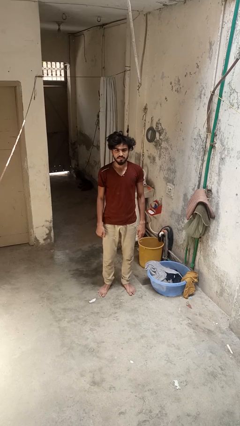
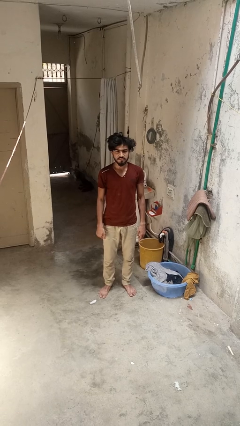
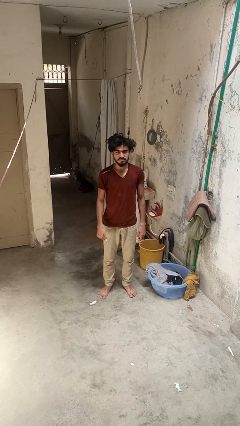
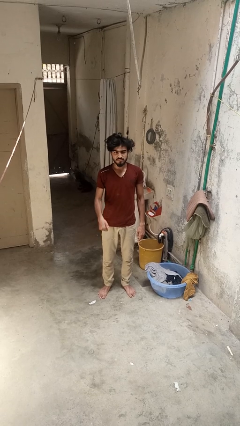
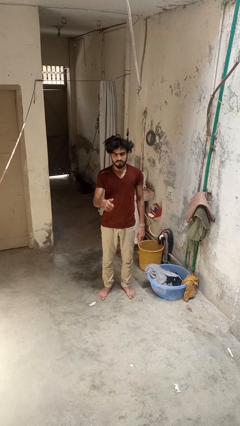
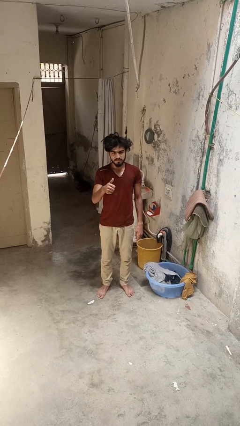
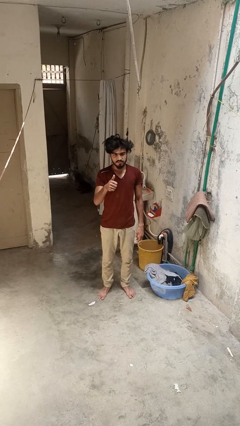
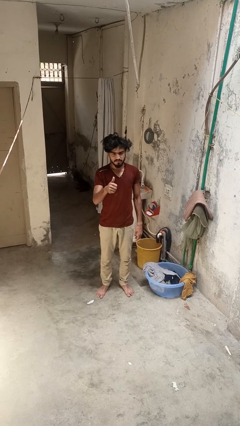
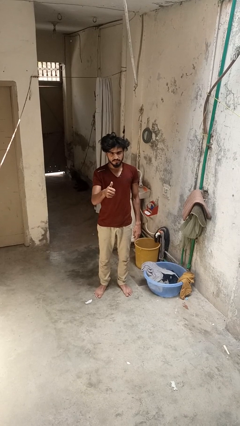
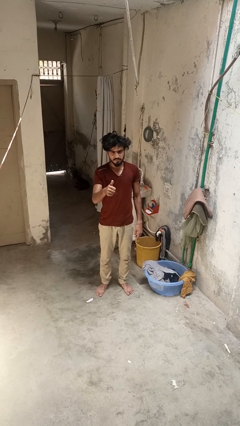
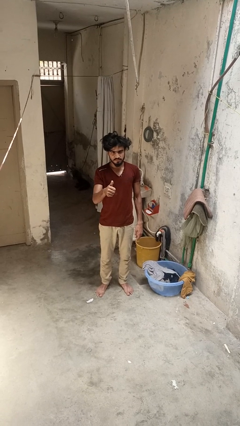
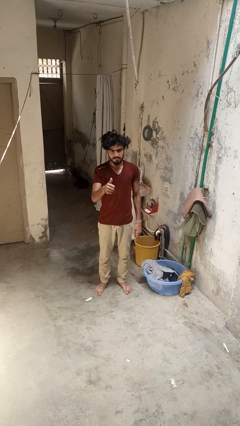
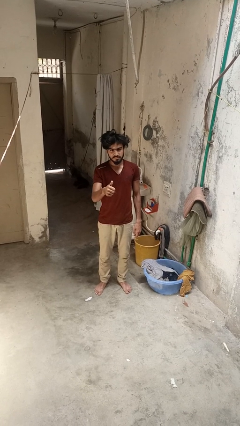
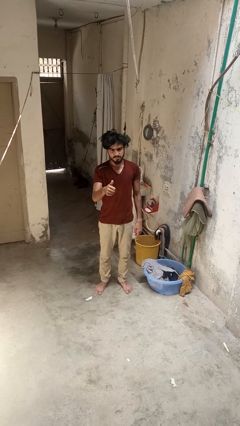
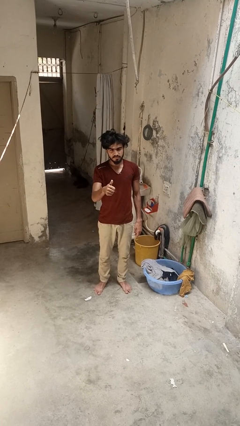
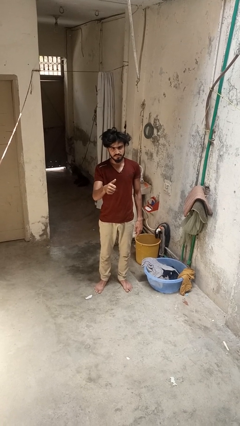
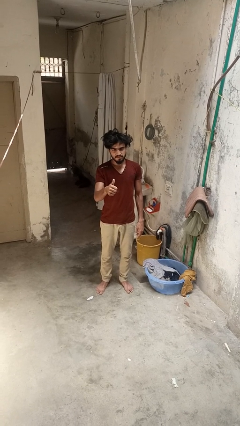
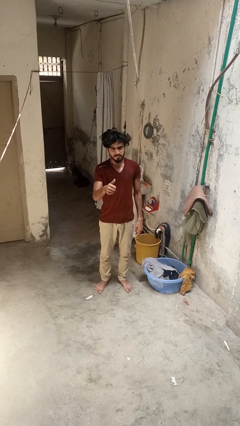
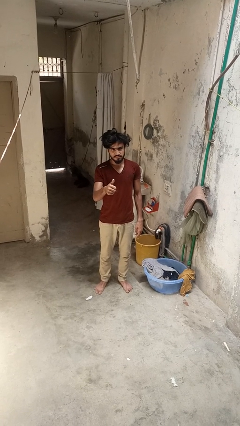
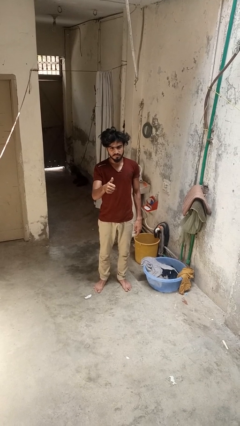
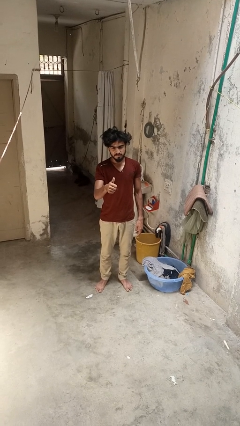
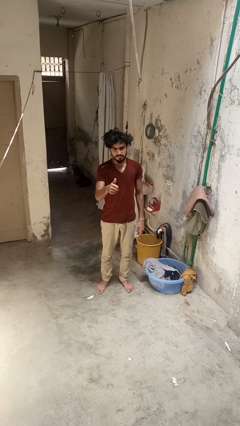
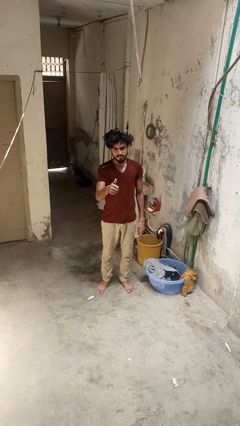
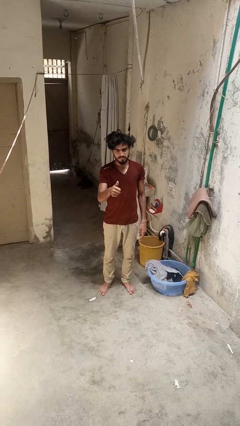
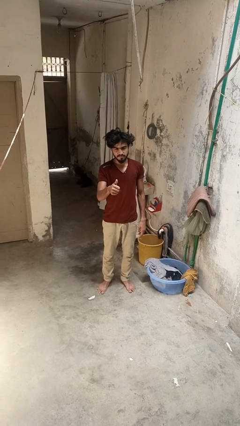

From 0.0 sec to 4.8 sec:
person gestures thumbs up

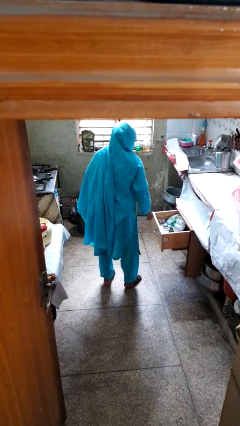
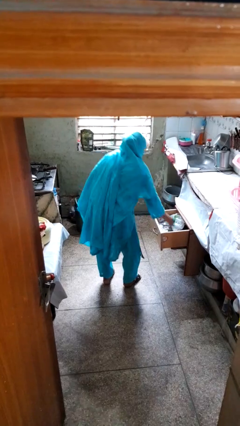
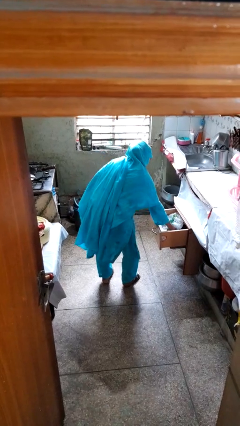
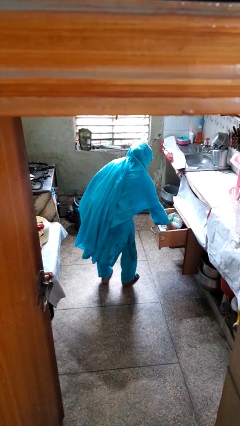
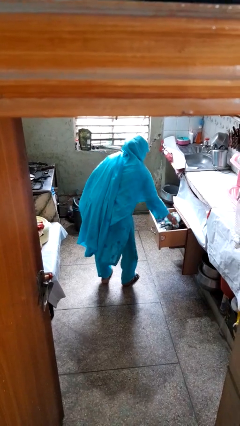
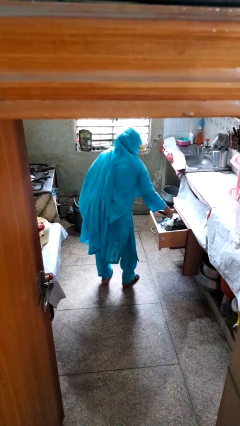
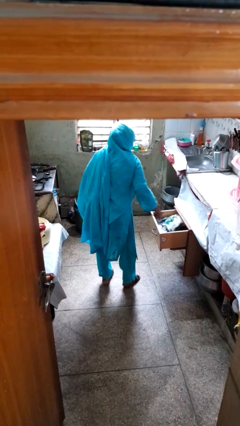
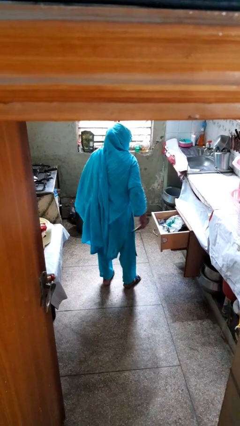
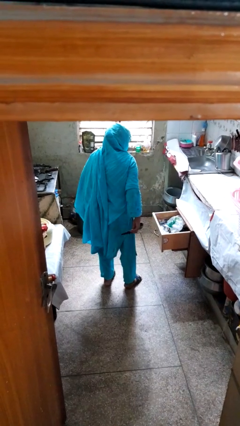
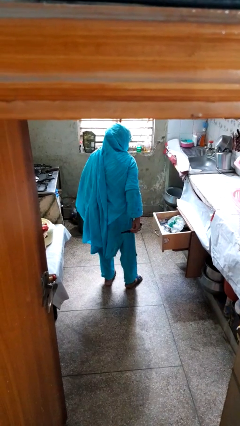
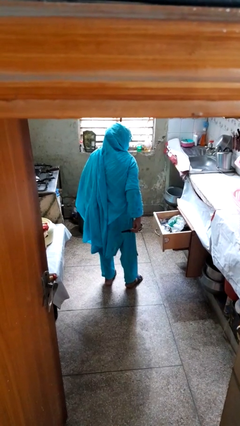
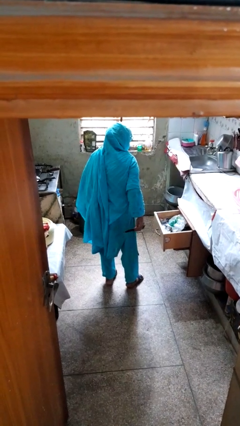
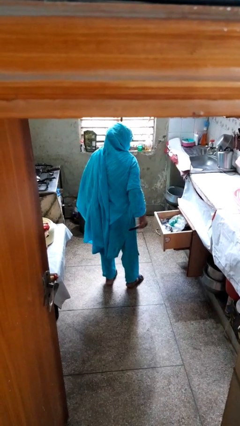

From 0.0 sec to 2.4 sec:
person takes object from kitchen drawer

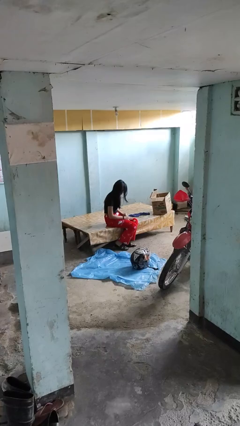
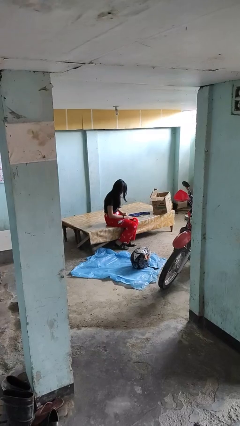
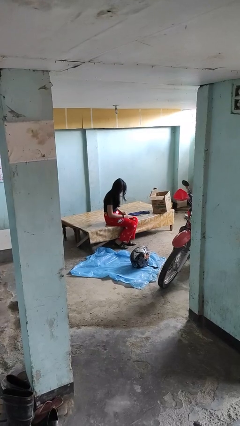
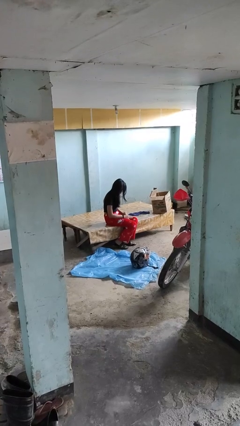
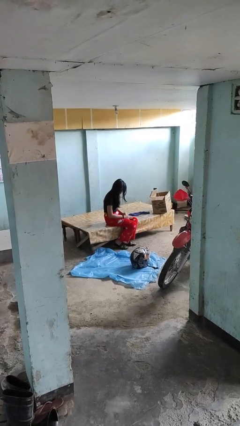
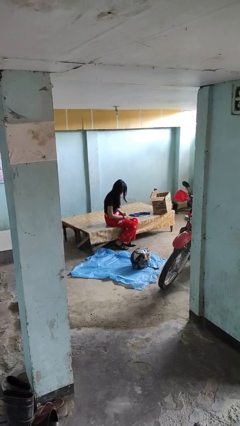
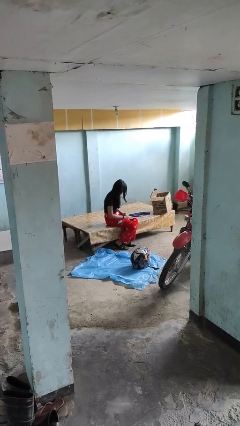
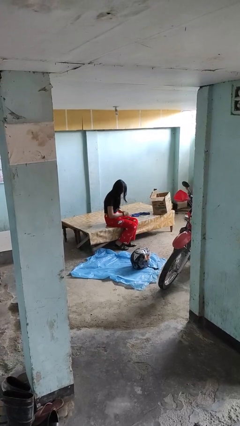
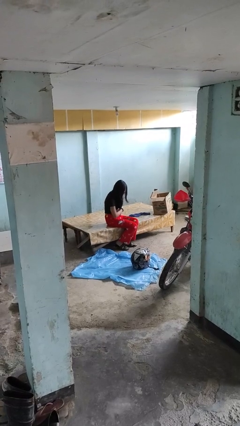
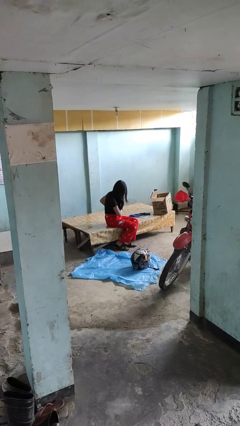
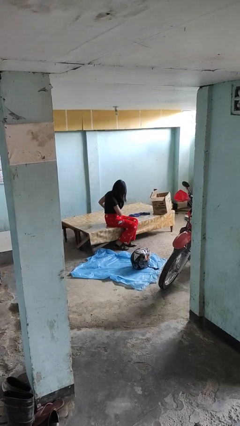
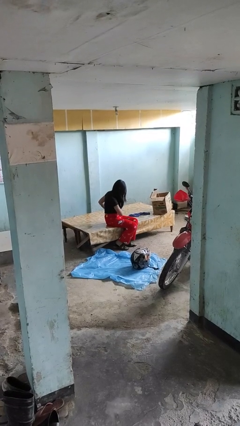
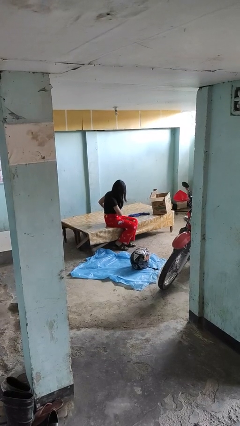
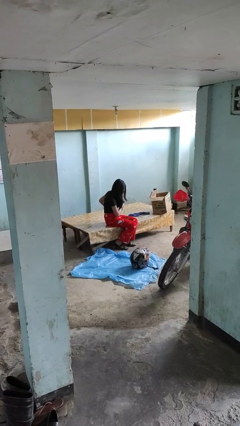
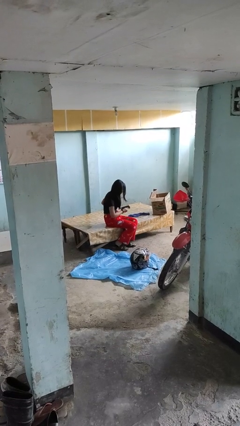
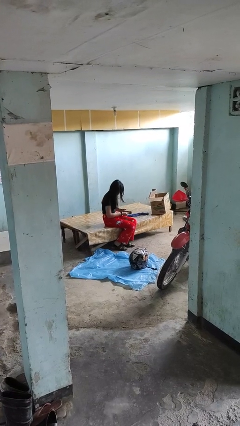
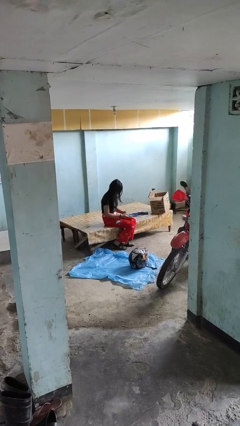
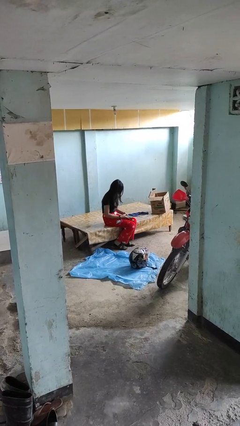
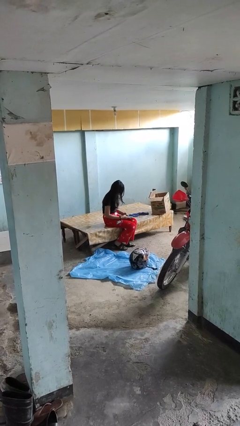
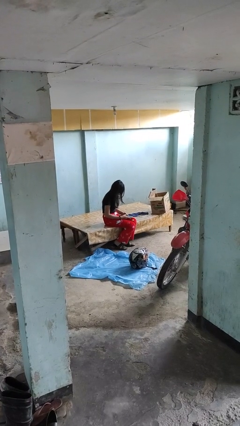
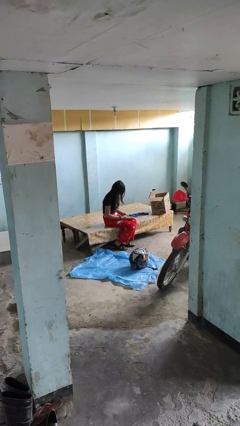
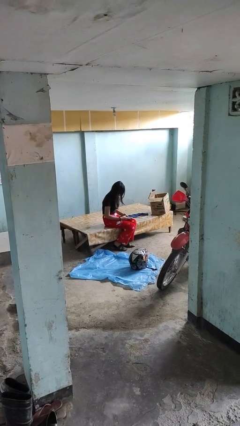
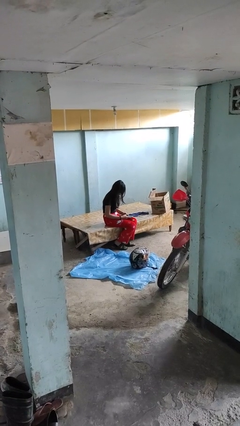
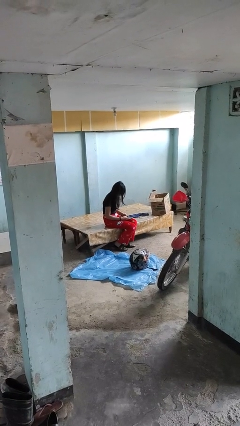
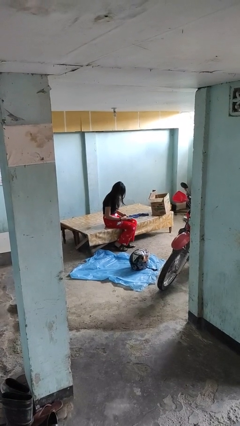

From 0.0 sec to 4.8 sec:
person takes phone from pocket

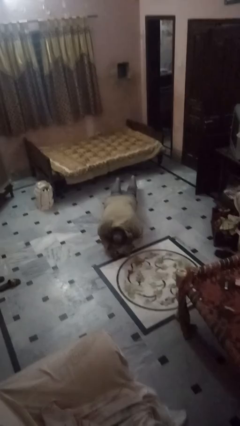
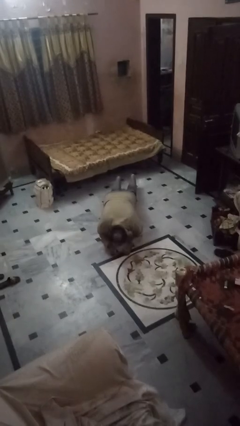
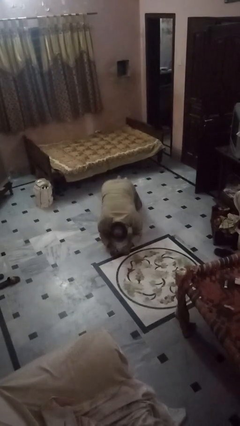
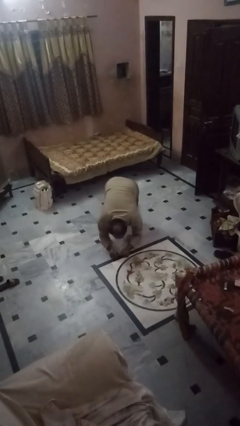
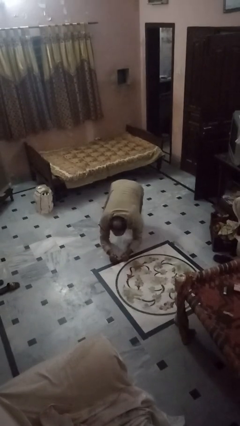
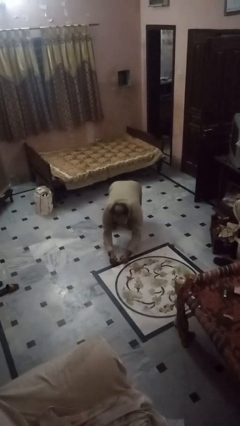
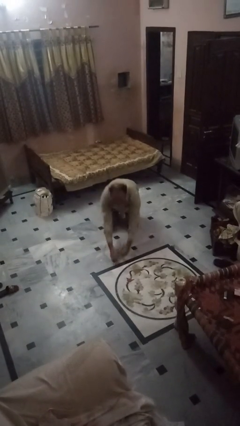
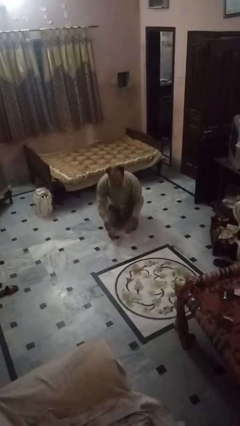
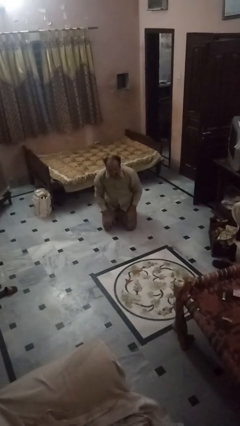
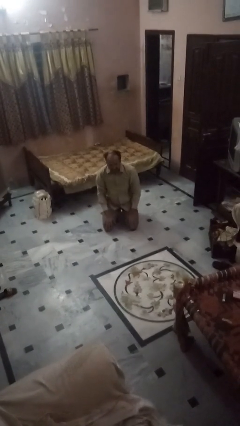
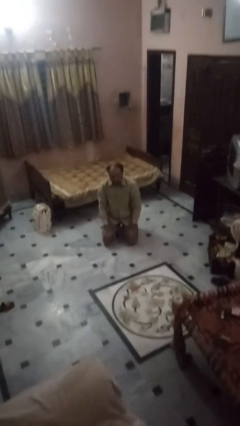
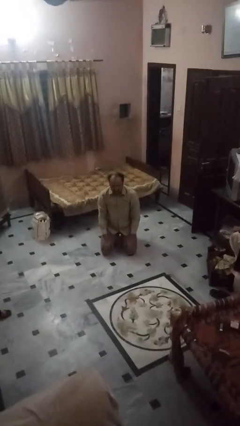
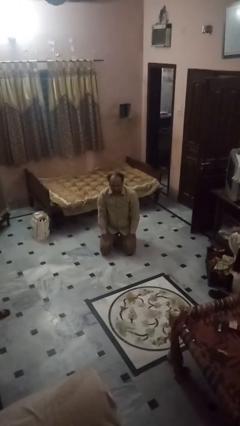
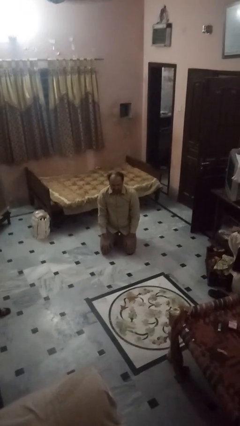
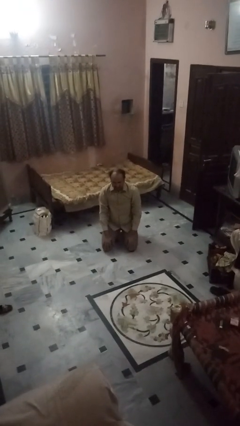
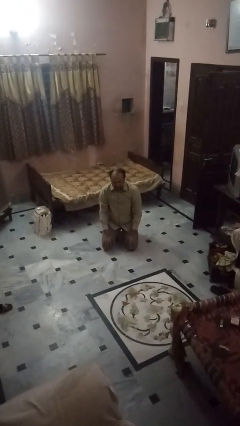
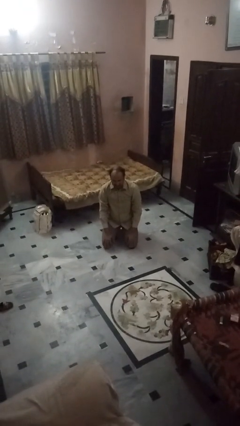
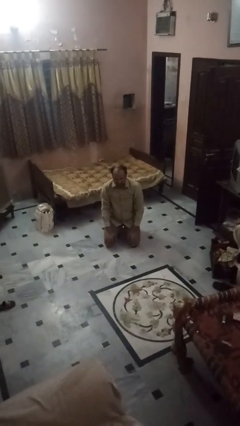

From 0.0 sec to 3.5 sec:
person stands up from floor

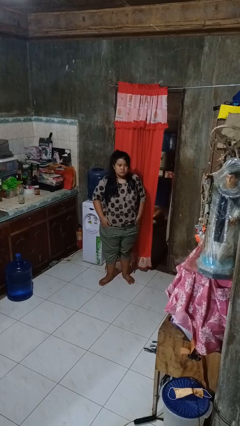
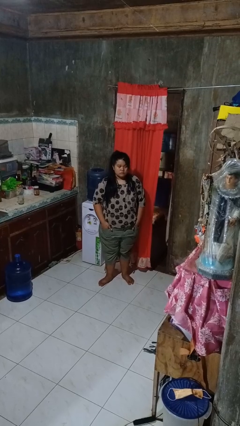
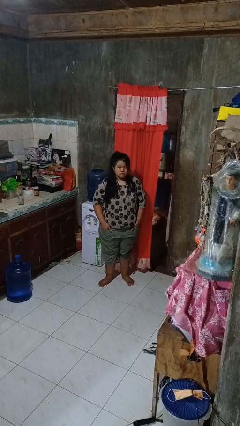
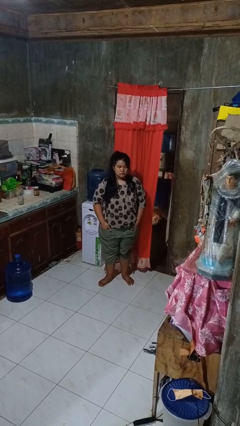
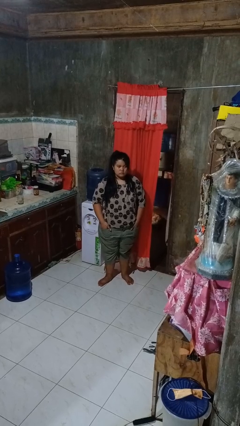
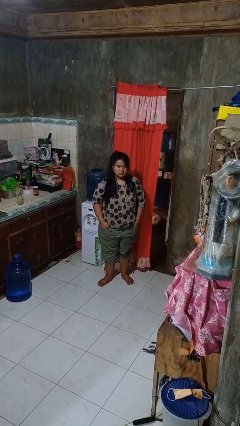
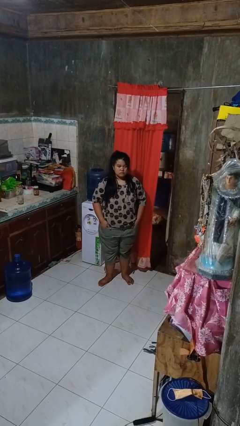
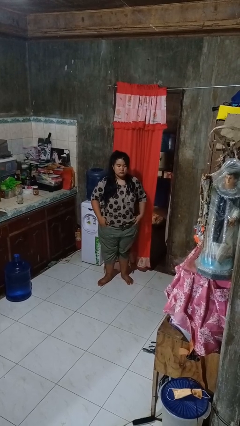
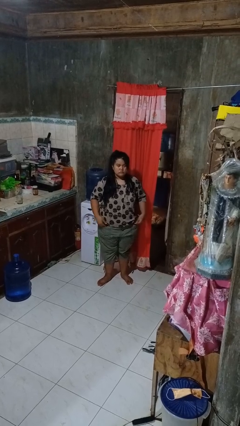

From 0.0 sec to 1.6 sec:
person puts hands in back pockets
